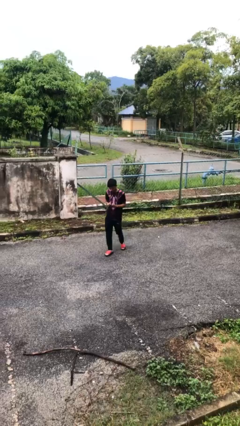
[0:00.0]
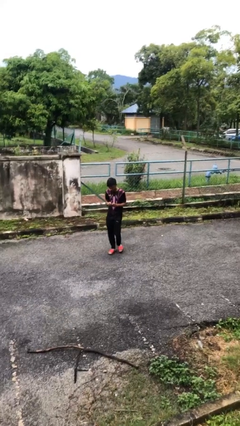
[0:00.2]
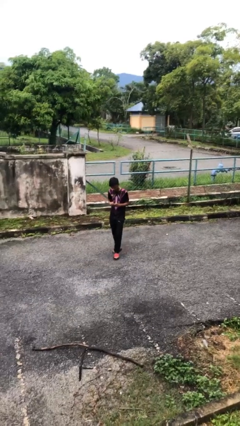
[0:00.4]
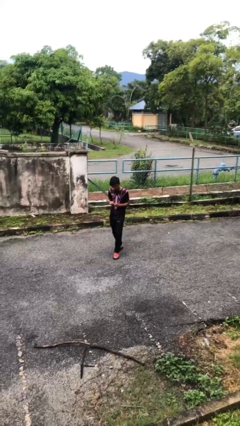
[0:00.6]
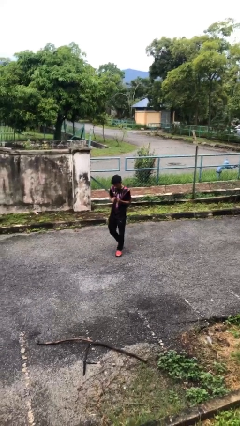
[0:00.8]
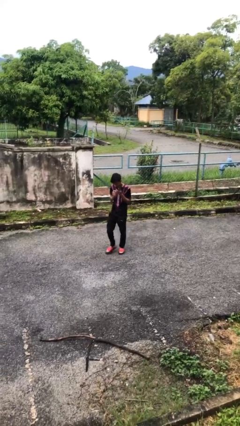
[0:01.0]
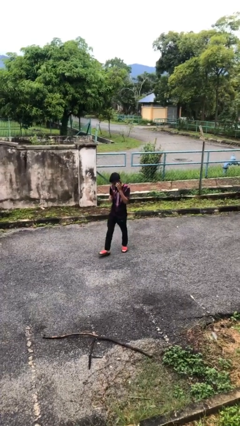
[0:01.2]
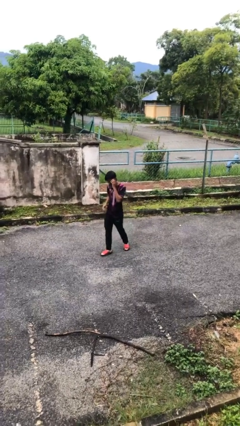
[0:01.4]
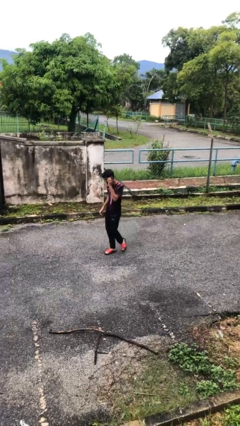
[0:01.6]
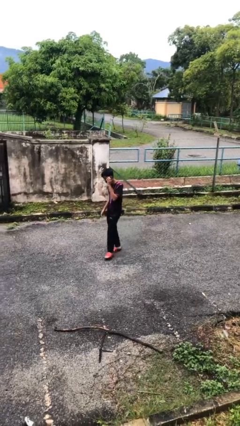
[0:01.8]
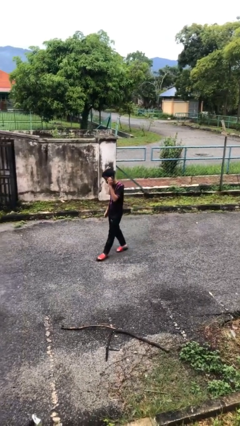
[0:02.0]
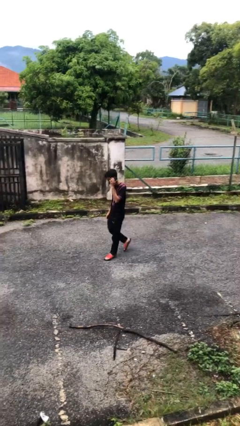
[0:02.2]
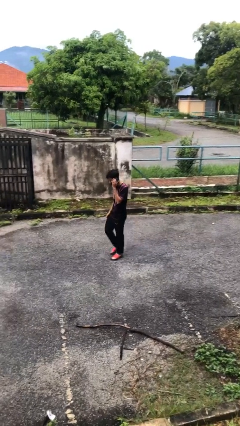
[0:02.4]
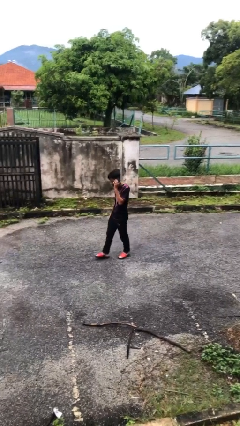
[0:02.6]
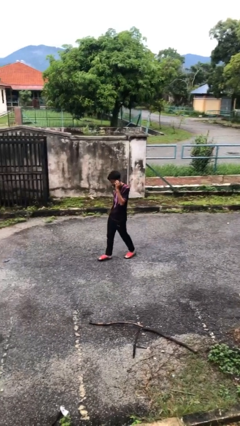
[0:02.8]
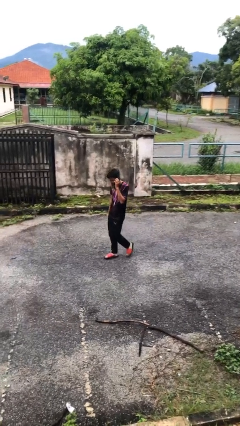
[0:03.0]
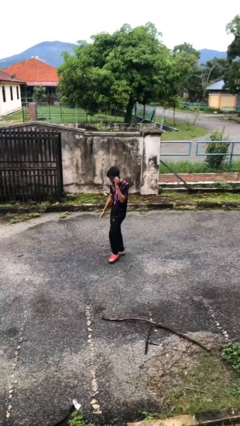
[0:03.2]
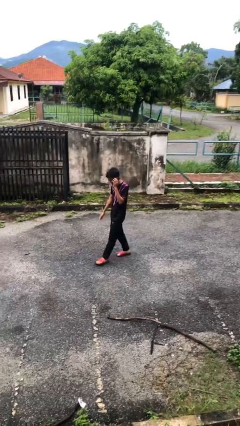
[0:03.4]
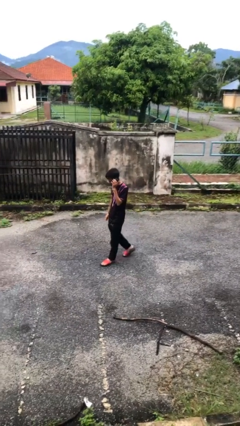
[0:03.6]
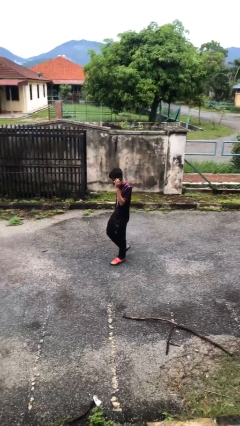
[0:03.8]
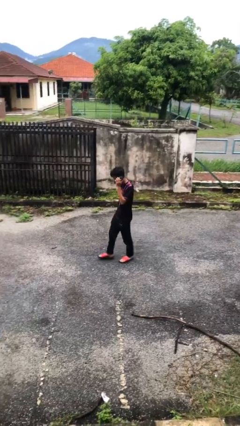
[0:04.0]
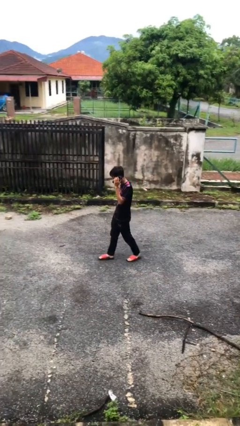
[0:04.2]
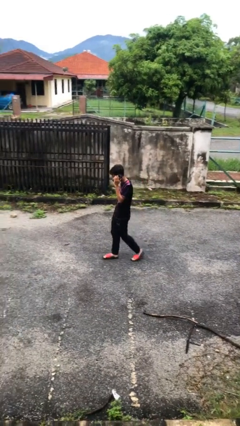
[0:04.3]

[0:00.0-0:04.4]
person talks on phone

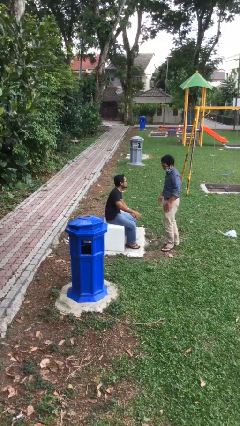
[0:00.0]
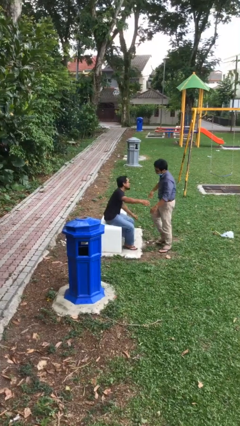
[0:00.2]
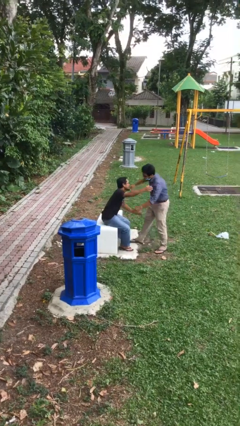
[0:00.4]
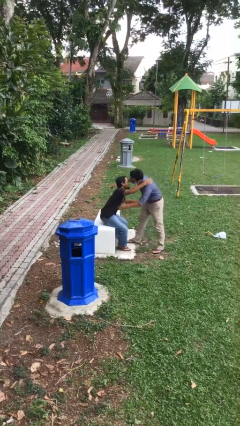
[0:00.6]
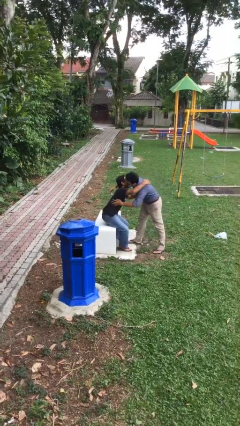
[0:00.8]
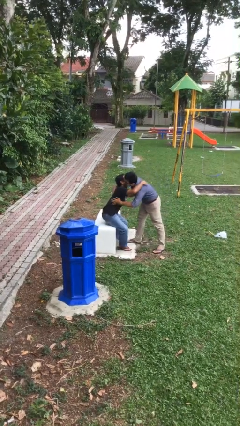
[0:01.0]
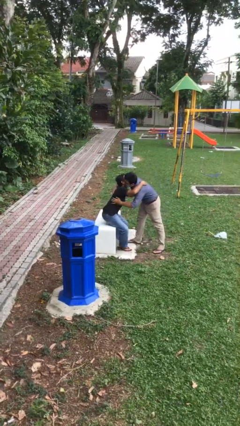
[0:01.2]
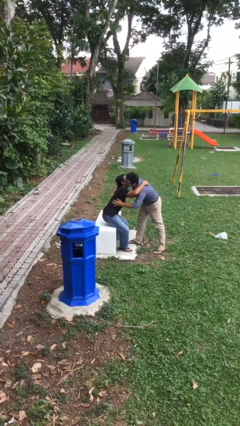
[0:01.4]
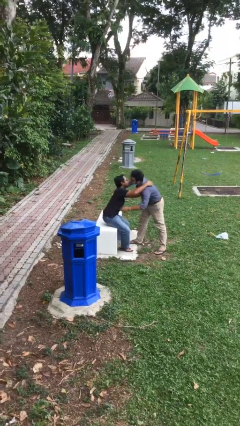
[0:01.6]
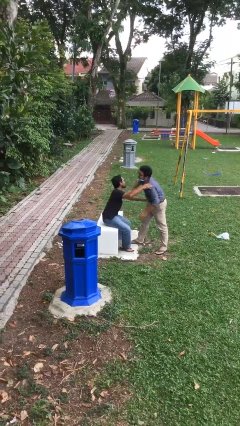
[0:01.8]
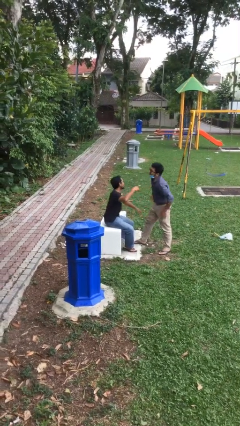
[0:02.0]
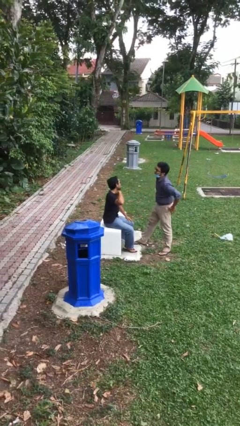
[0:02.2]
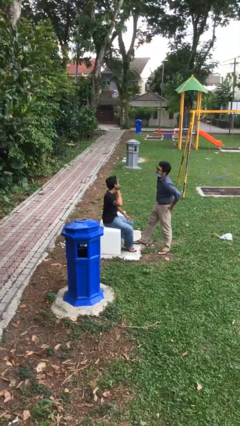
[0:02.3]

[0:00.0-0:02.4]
person embraces person

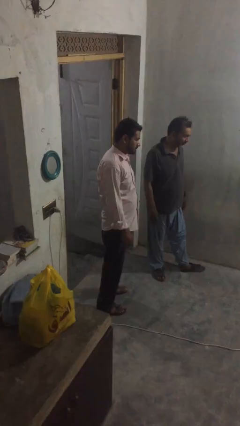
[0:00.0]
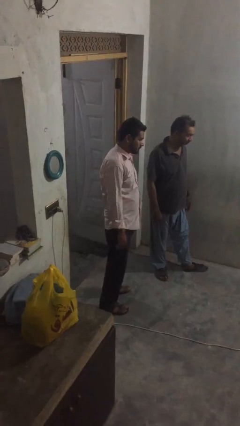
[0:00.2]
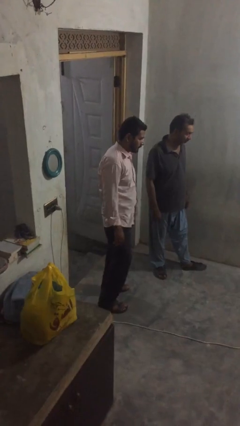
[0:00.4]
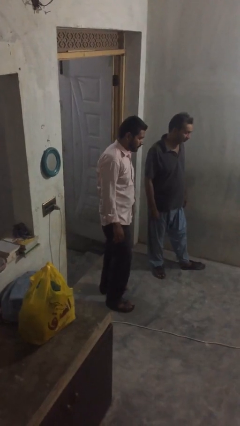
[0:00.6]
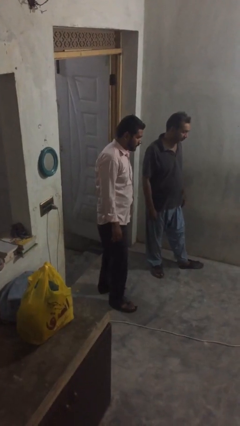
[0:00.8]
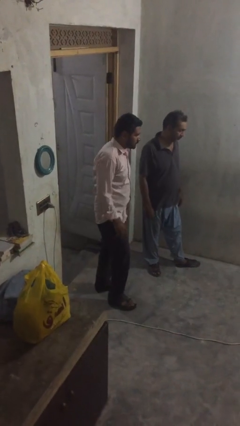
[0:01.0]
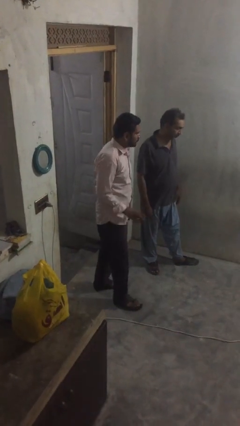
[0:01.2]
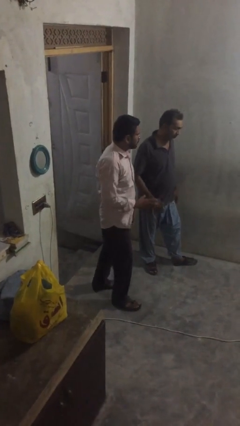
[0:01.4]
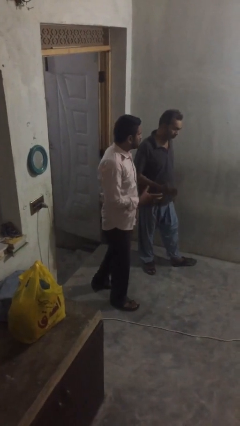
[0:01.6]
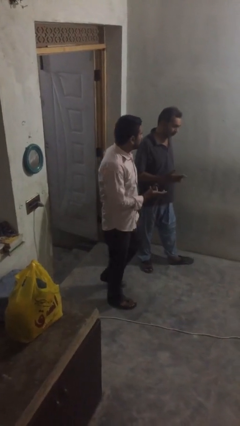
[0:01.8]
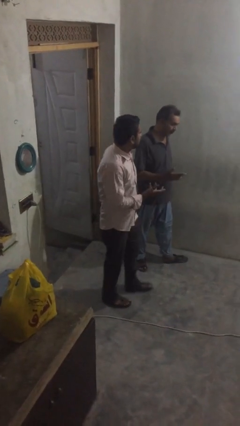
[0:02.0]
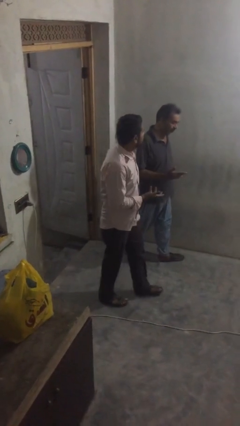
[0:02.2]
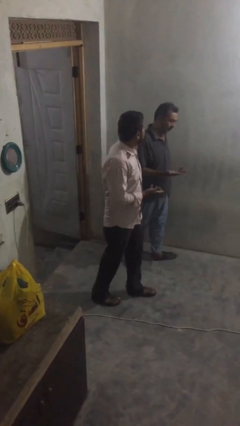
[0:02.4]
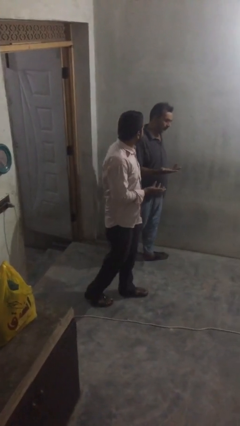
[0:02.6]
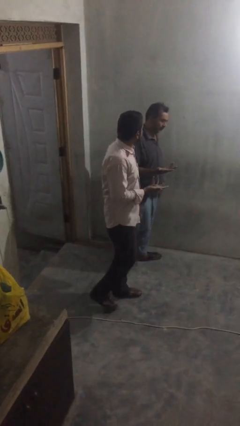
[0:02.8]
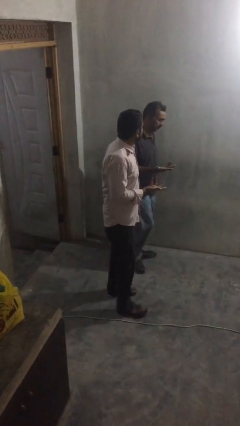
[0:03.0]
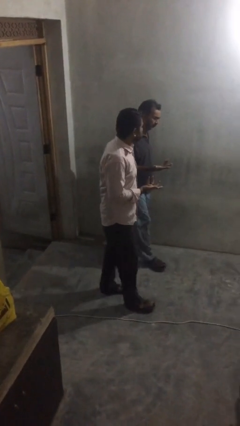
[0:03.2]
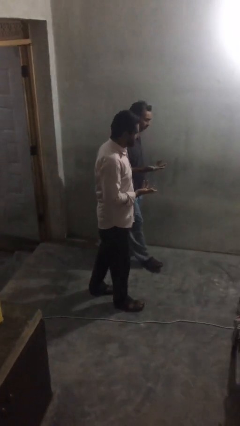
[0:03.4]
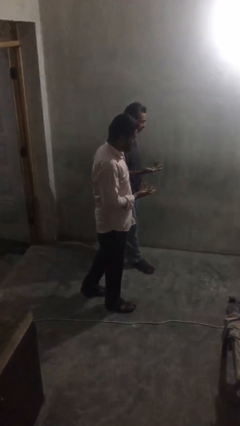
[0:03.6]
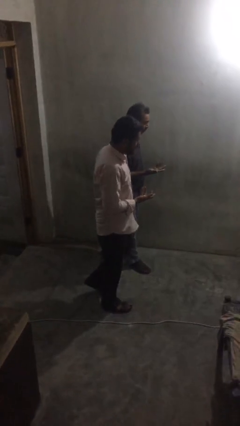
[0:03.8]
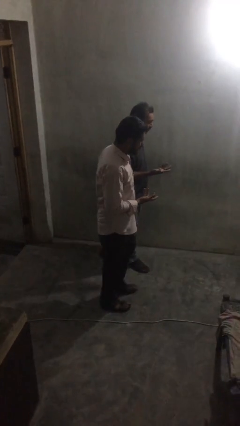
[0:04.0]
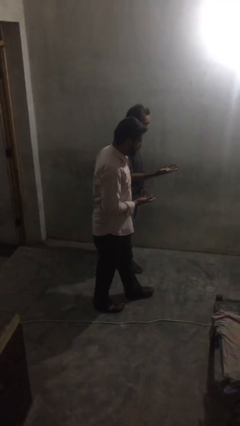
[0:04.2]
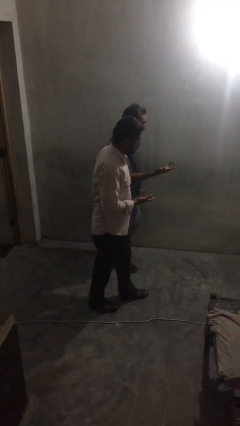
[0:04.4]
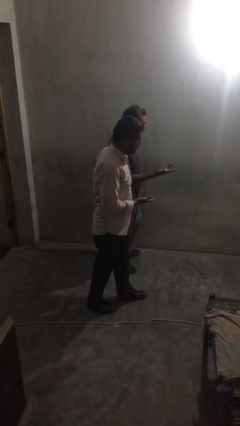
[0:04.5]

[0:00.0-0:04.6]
person talks to person

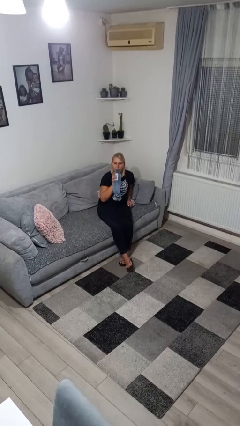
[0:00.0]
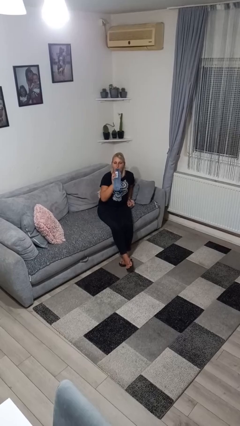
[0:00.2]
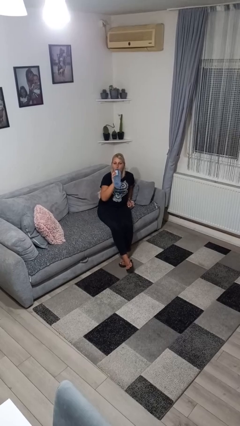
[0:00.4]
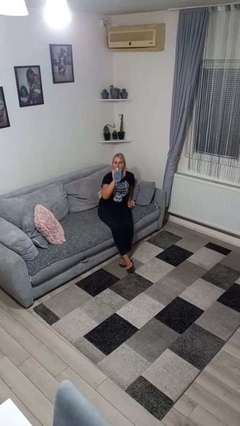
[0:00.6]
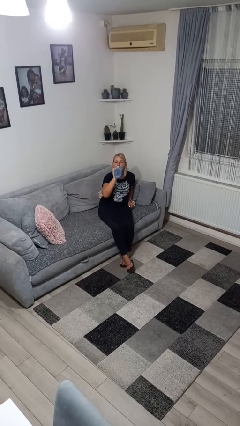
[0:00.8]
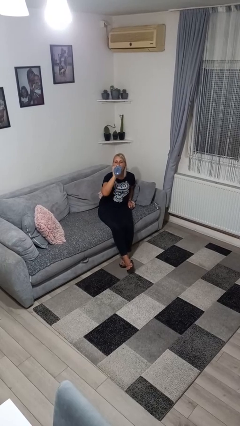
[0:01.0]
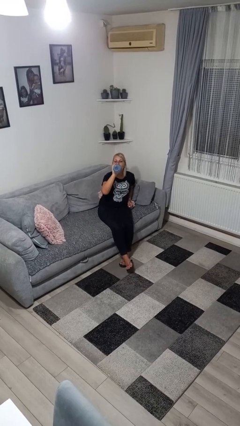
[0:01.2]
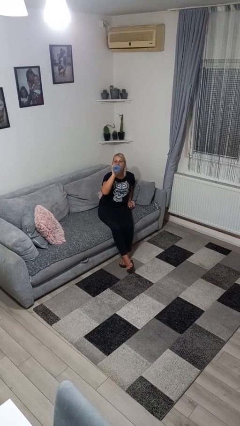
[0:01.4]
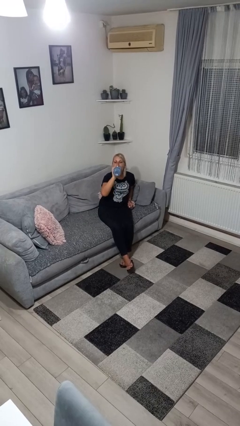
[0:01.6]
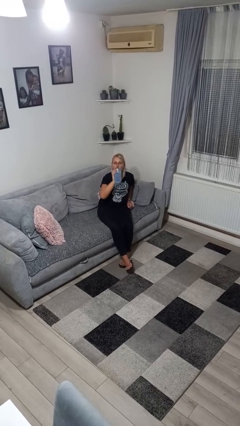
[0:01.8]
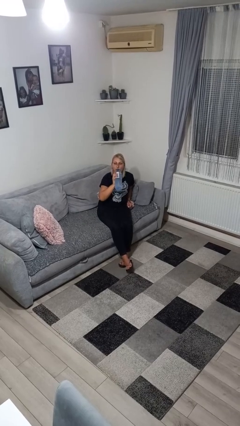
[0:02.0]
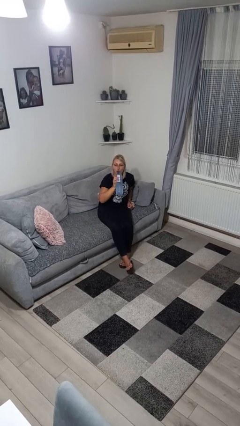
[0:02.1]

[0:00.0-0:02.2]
person drinks from bottle

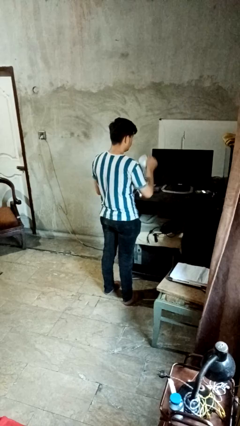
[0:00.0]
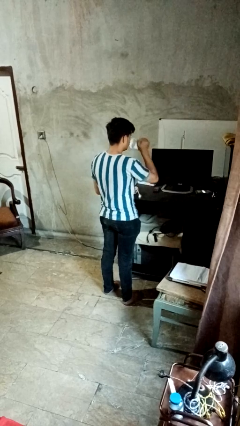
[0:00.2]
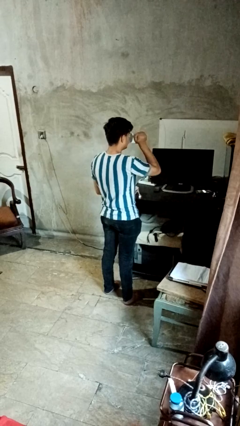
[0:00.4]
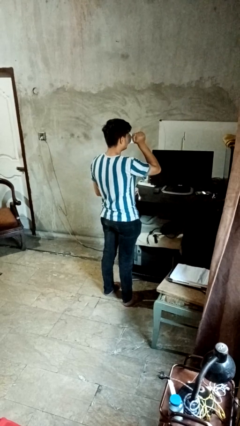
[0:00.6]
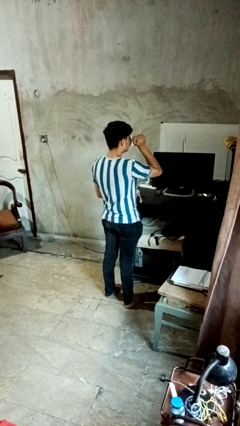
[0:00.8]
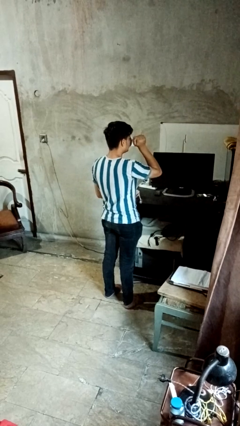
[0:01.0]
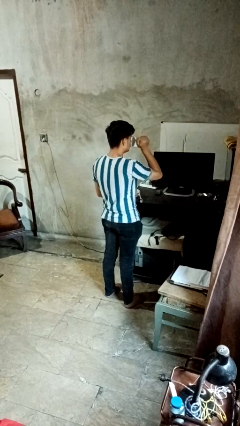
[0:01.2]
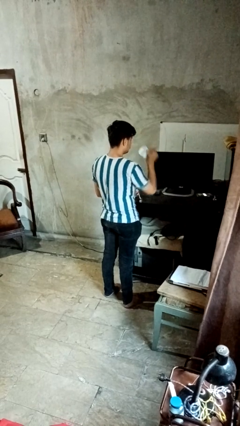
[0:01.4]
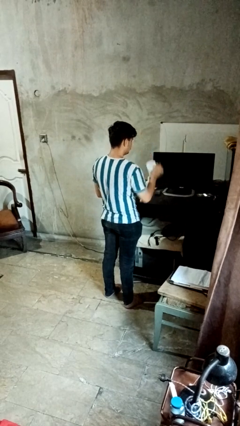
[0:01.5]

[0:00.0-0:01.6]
person drinks from mug

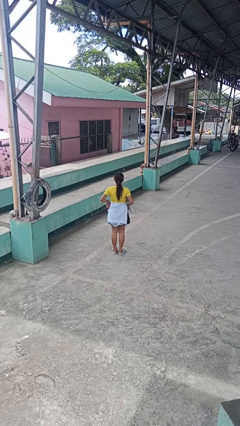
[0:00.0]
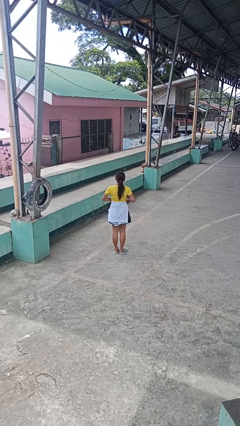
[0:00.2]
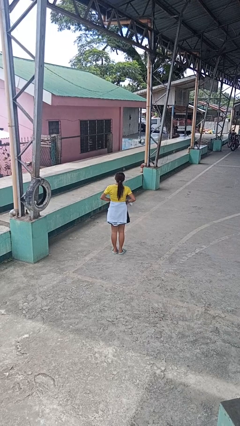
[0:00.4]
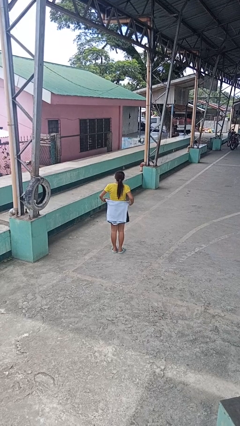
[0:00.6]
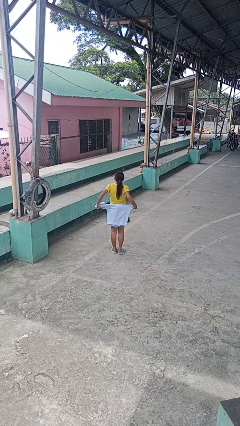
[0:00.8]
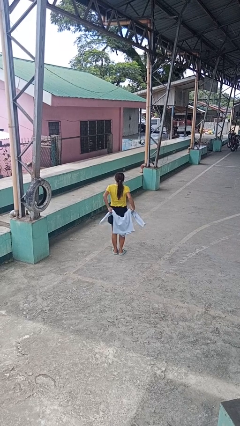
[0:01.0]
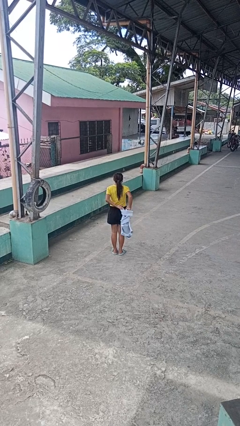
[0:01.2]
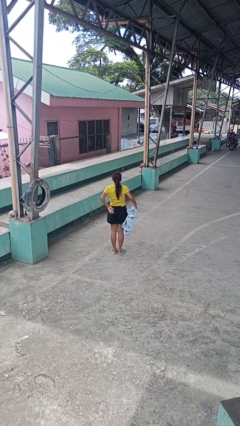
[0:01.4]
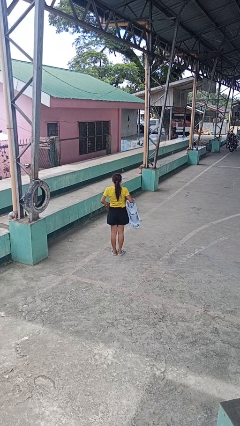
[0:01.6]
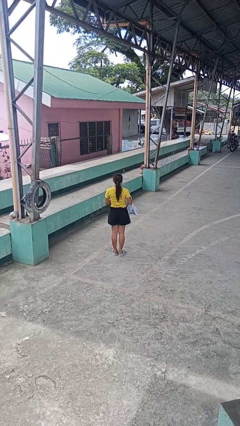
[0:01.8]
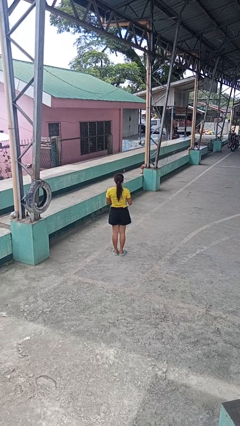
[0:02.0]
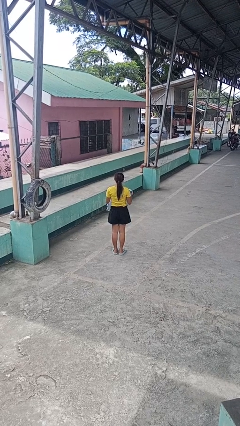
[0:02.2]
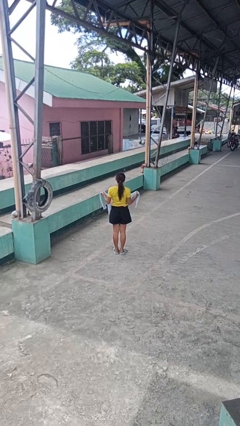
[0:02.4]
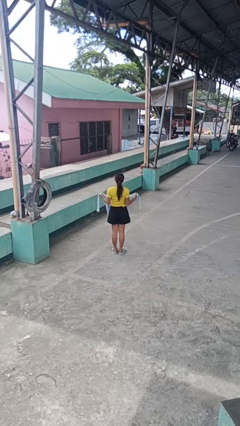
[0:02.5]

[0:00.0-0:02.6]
person unties jacket around waist

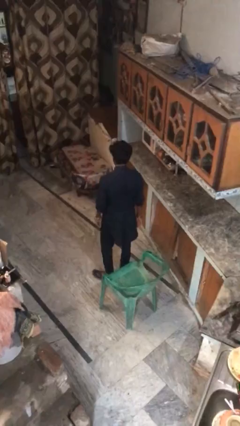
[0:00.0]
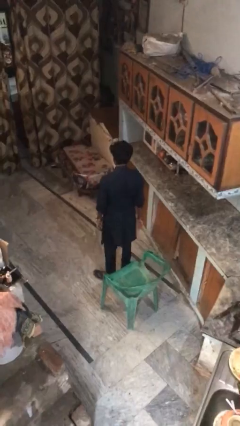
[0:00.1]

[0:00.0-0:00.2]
person sits down
